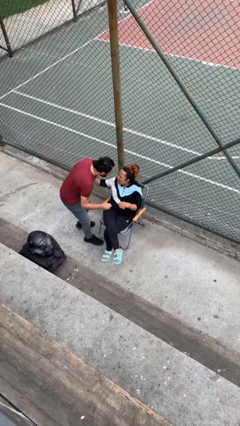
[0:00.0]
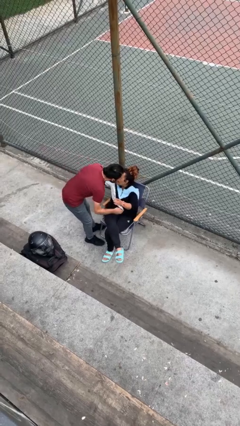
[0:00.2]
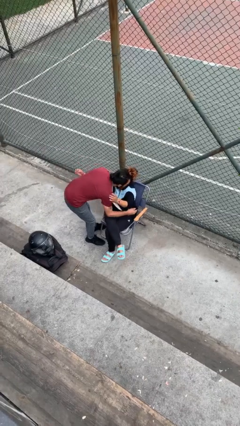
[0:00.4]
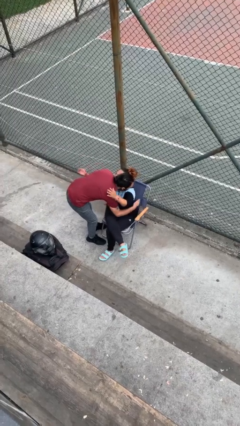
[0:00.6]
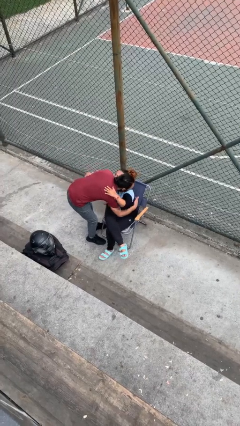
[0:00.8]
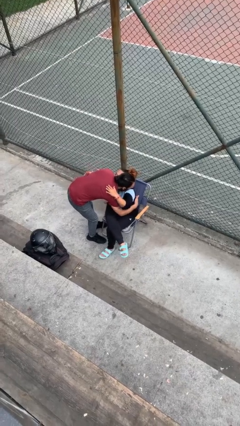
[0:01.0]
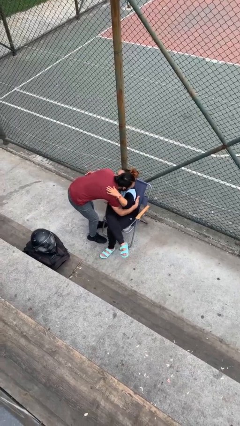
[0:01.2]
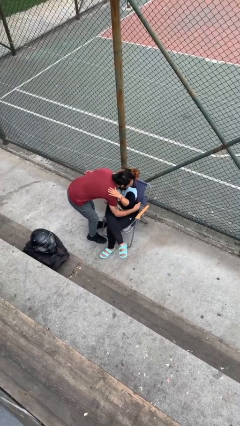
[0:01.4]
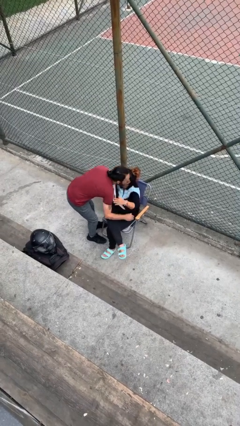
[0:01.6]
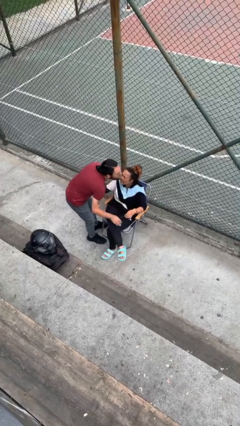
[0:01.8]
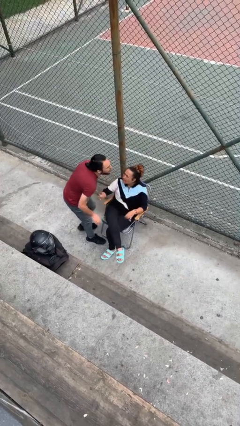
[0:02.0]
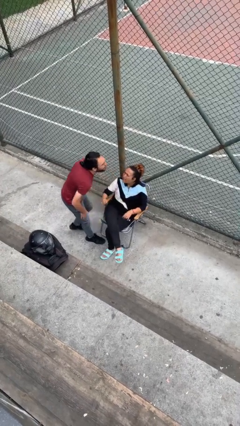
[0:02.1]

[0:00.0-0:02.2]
person embraces person

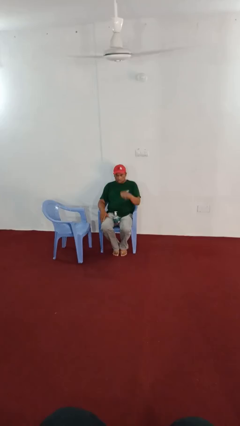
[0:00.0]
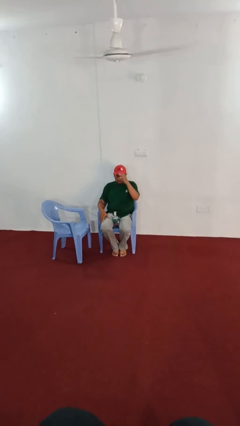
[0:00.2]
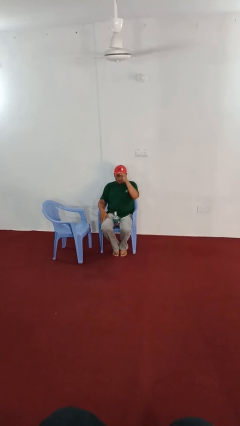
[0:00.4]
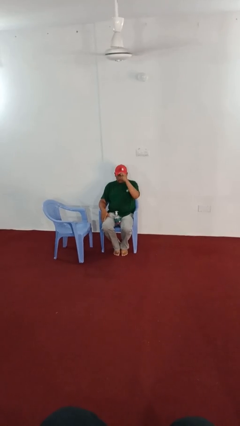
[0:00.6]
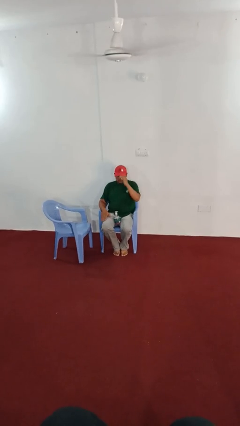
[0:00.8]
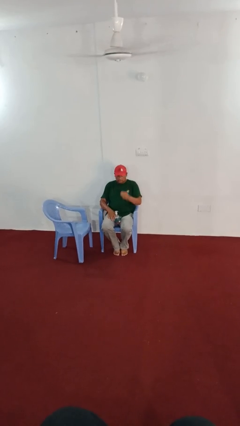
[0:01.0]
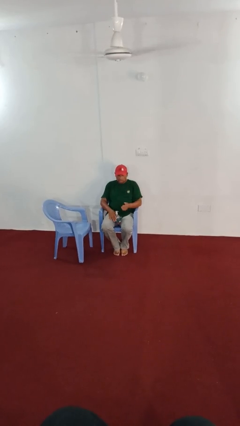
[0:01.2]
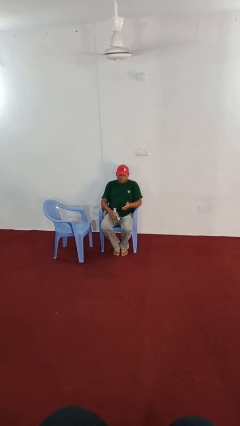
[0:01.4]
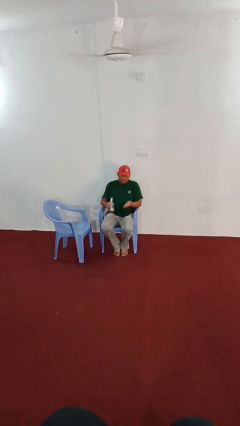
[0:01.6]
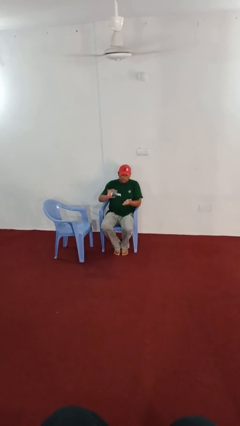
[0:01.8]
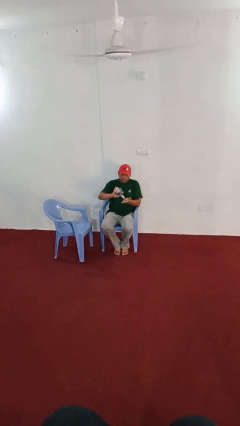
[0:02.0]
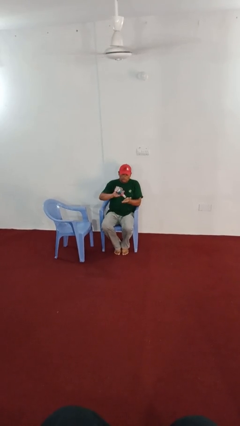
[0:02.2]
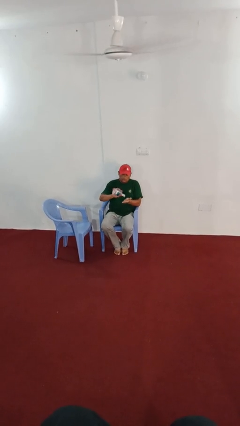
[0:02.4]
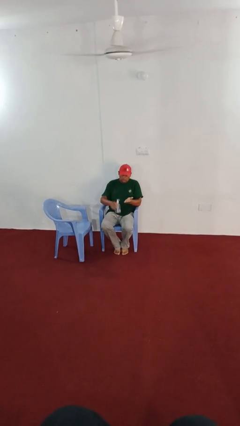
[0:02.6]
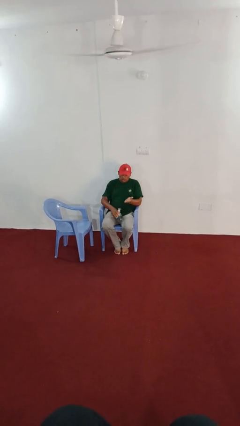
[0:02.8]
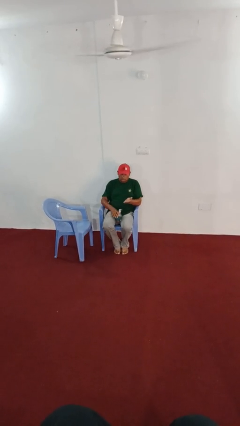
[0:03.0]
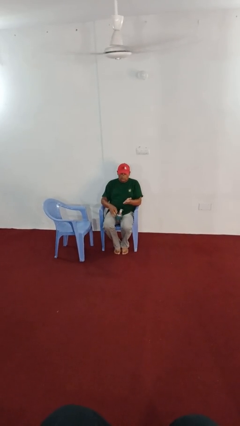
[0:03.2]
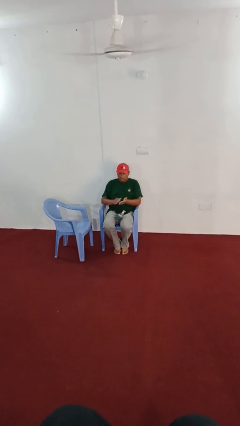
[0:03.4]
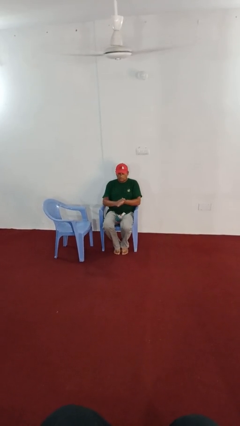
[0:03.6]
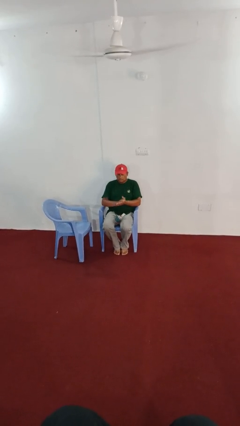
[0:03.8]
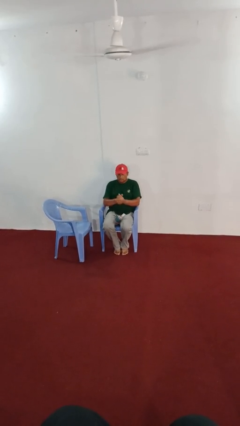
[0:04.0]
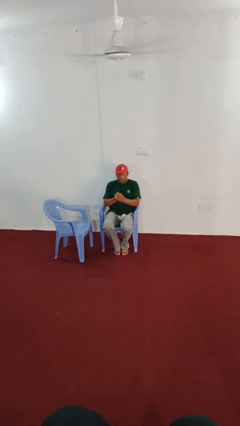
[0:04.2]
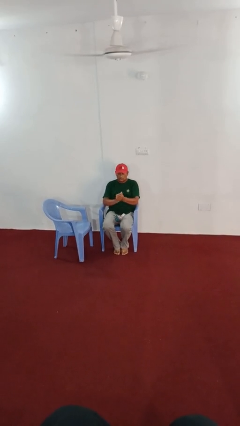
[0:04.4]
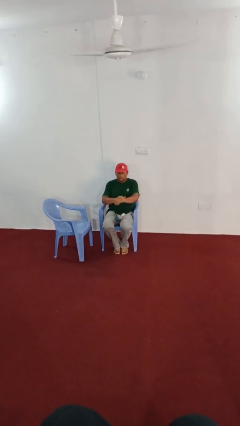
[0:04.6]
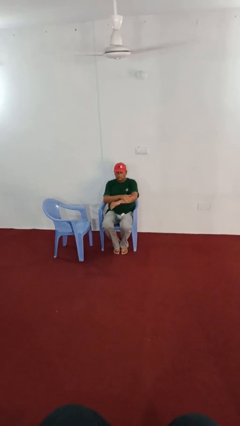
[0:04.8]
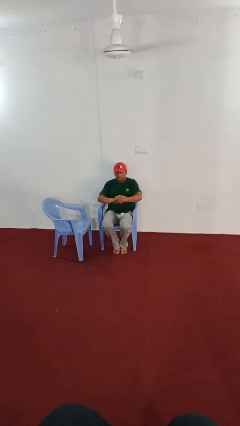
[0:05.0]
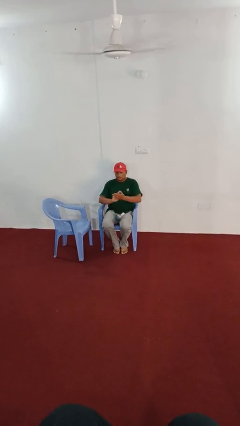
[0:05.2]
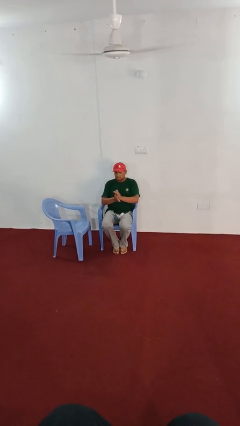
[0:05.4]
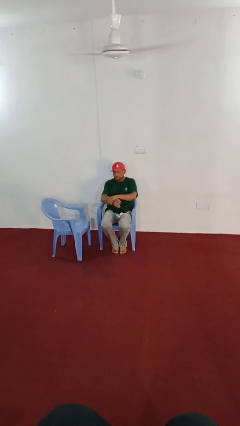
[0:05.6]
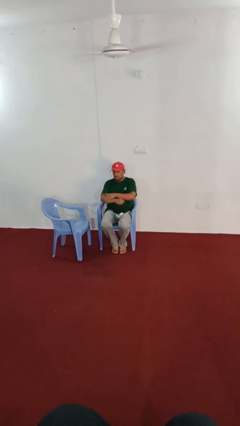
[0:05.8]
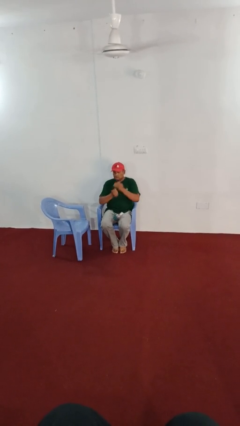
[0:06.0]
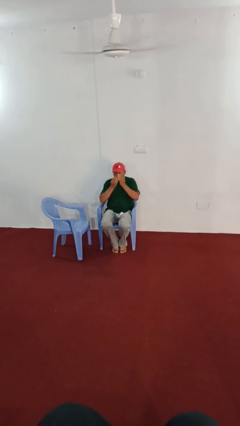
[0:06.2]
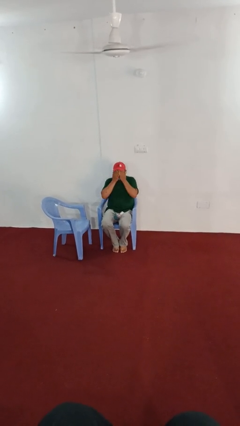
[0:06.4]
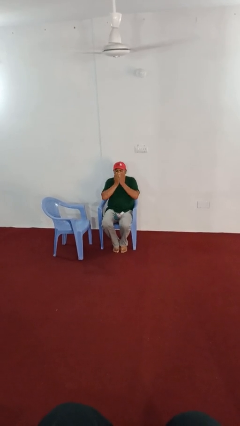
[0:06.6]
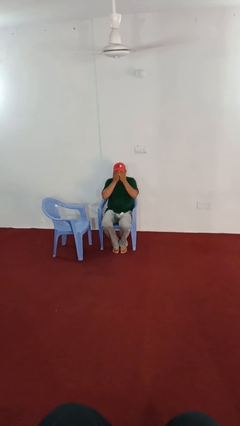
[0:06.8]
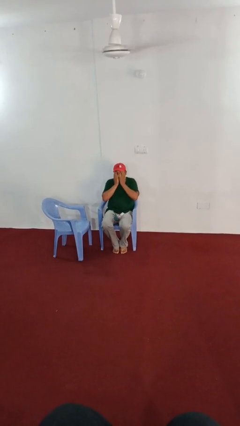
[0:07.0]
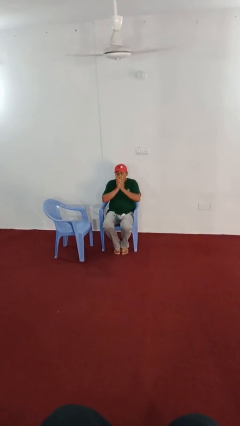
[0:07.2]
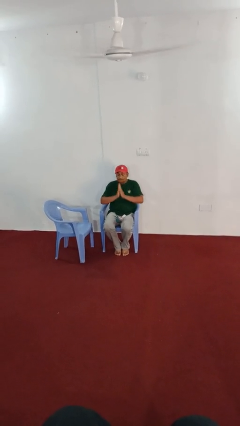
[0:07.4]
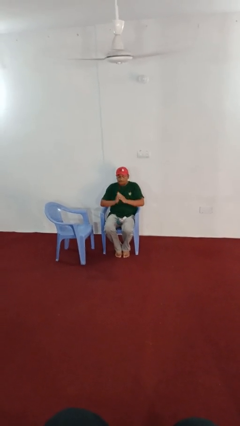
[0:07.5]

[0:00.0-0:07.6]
person applies sunscreen

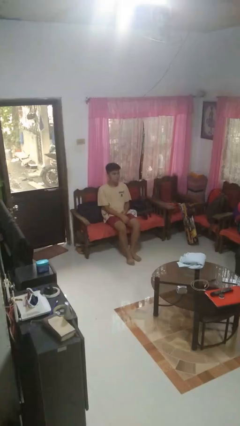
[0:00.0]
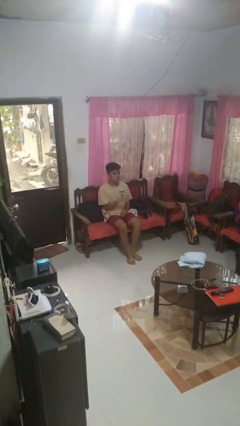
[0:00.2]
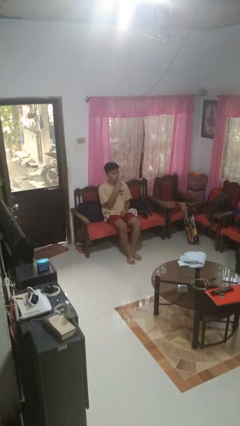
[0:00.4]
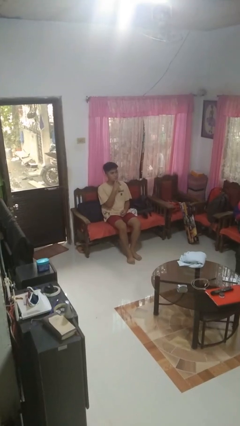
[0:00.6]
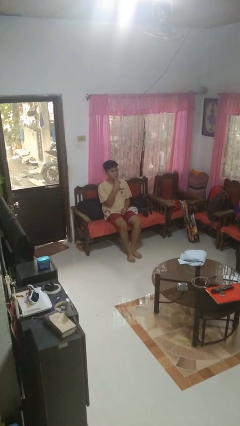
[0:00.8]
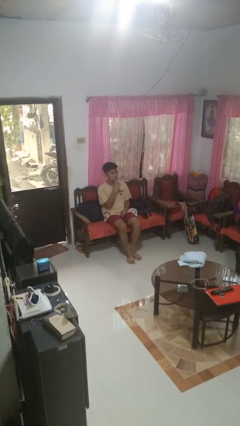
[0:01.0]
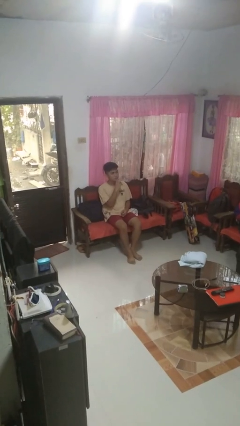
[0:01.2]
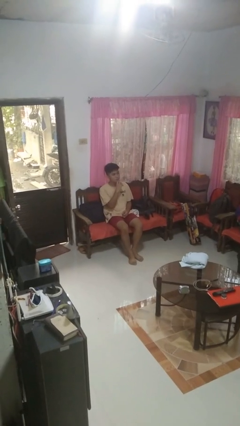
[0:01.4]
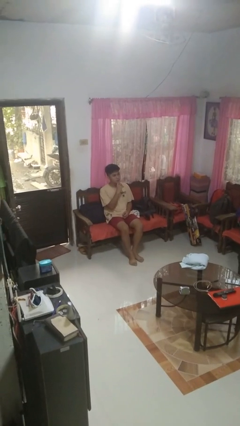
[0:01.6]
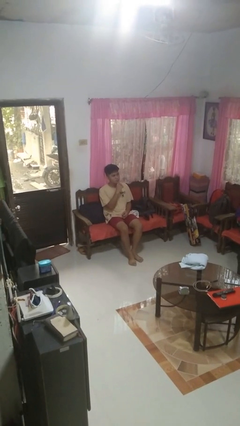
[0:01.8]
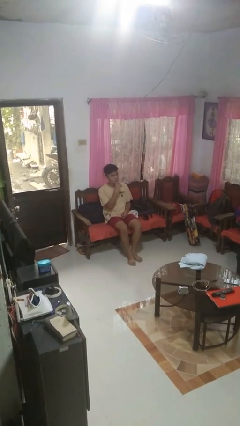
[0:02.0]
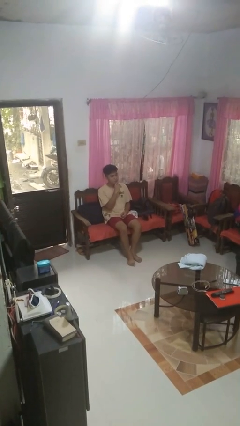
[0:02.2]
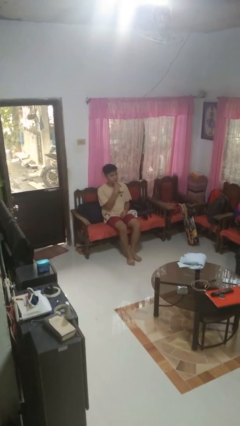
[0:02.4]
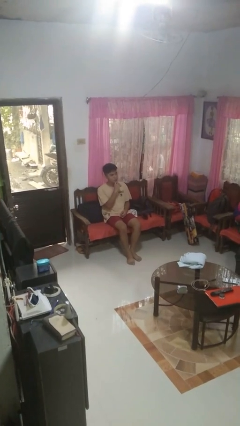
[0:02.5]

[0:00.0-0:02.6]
person strokes chin

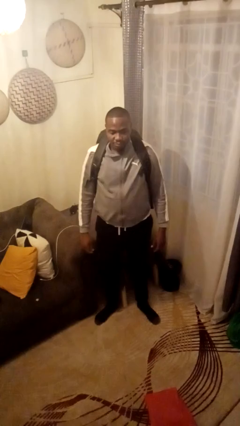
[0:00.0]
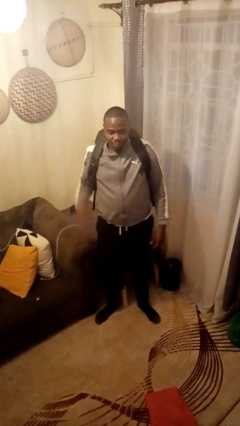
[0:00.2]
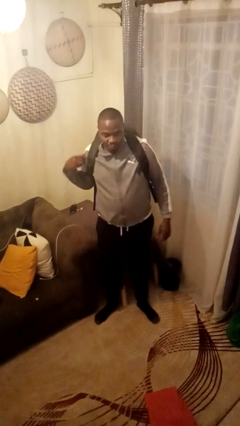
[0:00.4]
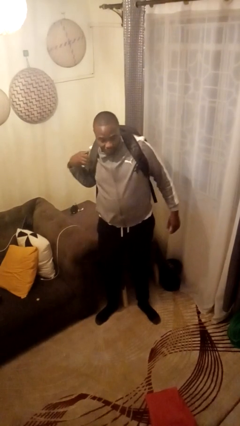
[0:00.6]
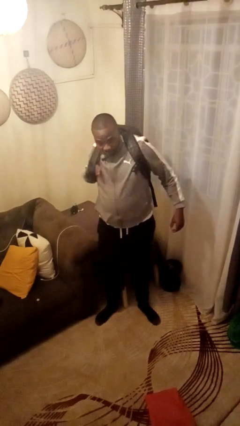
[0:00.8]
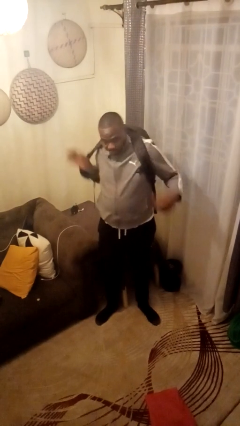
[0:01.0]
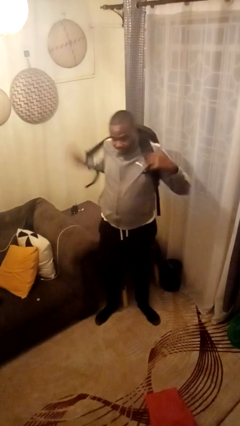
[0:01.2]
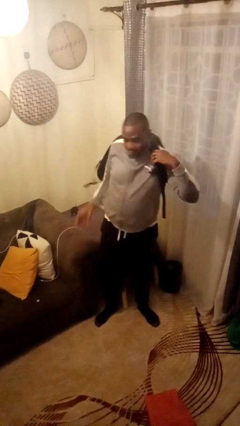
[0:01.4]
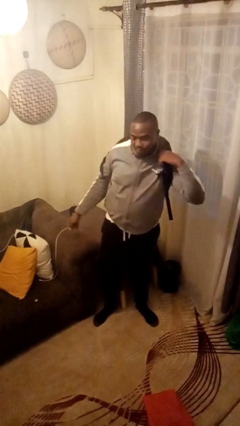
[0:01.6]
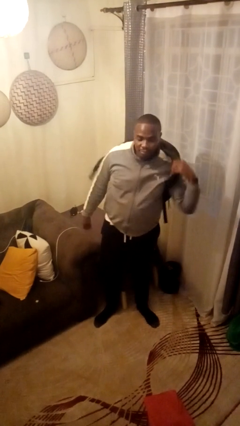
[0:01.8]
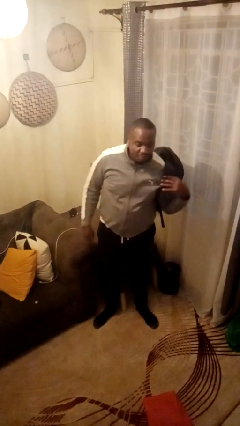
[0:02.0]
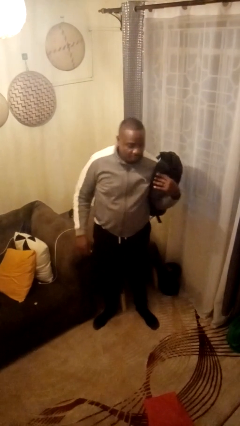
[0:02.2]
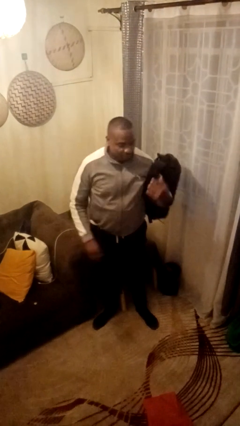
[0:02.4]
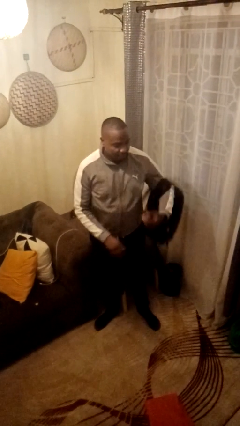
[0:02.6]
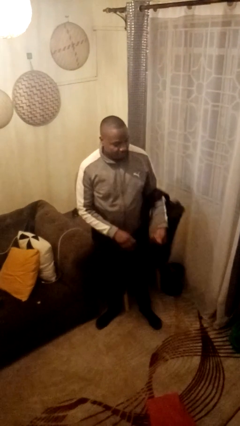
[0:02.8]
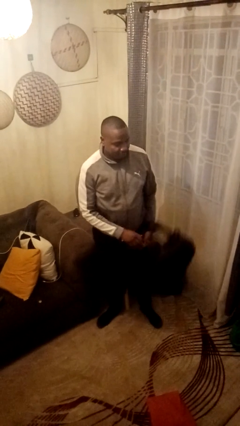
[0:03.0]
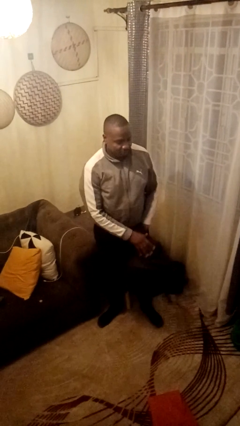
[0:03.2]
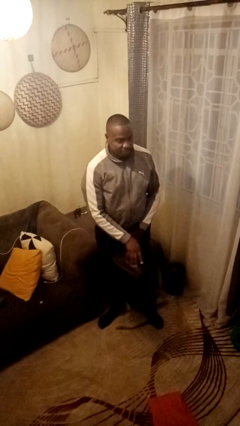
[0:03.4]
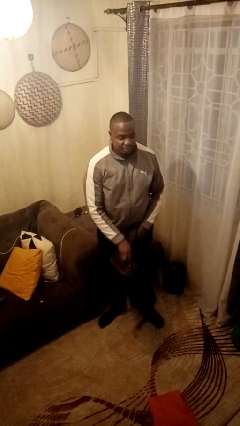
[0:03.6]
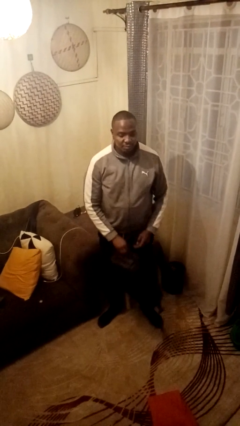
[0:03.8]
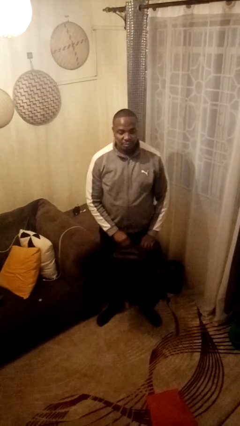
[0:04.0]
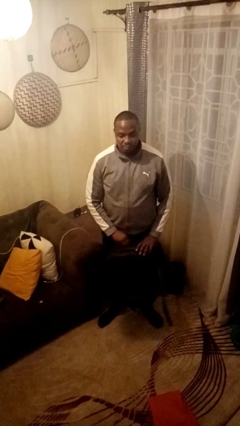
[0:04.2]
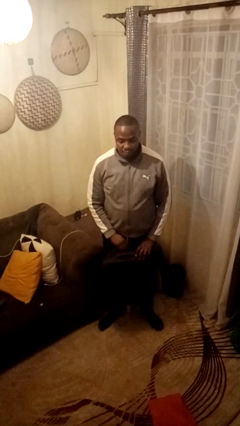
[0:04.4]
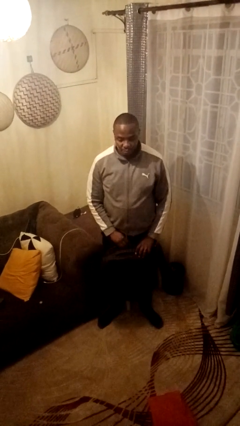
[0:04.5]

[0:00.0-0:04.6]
person takes off backpack

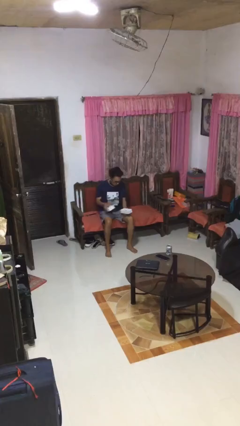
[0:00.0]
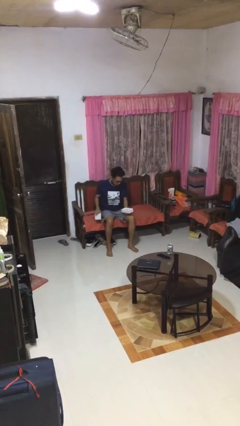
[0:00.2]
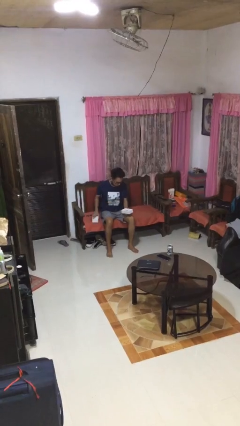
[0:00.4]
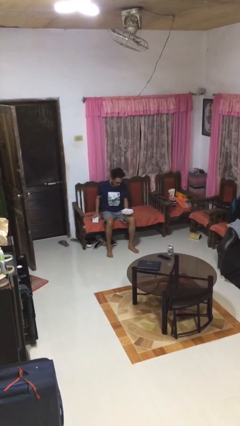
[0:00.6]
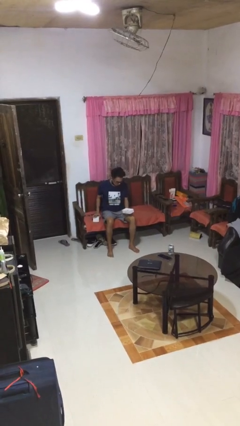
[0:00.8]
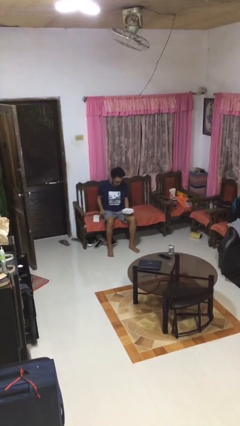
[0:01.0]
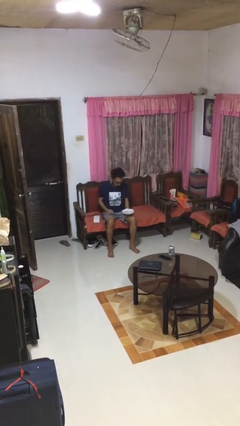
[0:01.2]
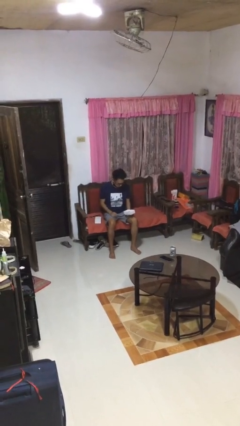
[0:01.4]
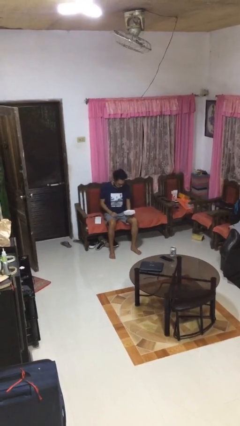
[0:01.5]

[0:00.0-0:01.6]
person opens jewelry box
